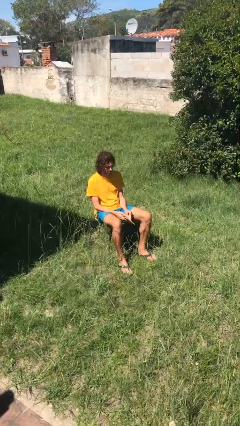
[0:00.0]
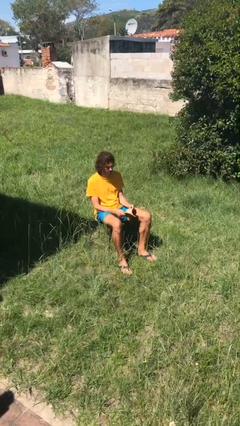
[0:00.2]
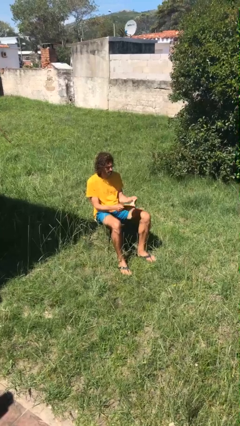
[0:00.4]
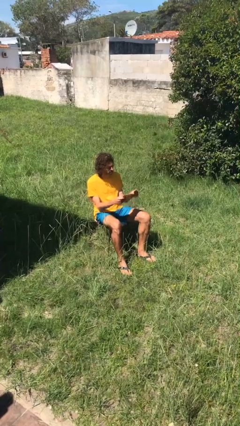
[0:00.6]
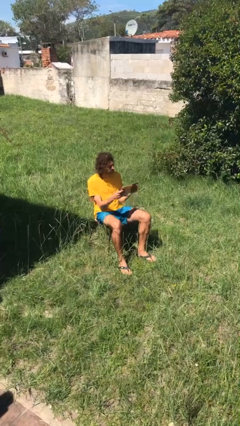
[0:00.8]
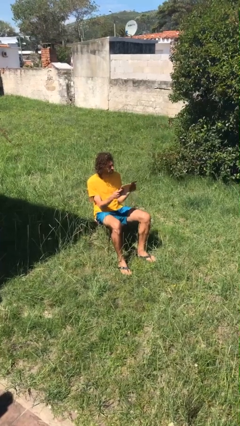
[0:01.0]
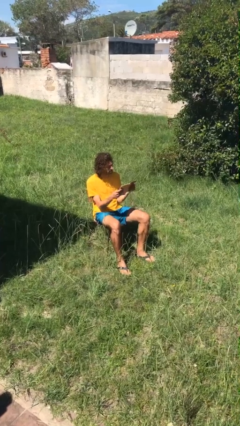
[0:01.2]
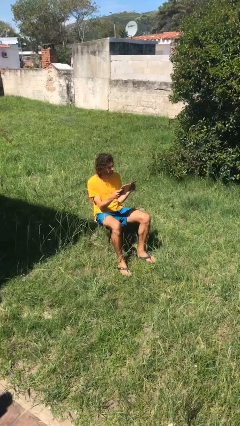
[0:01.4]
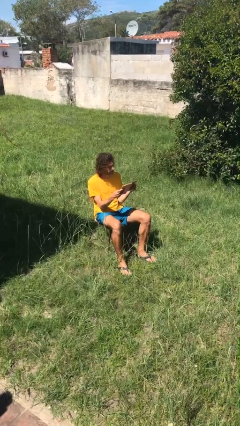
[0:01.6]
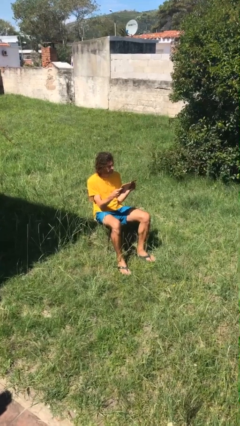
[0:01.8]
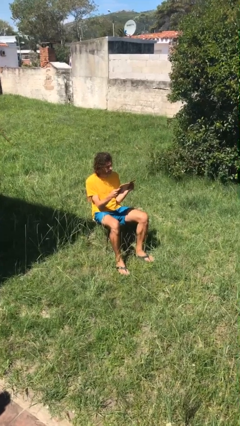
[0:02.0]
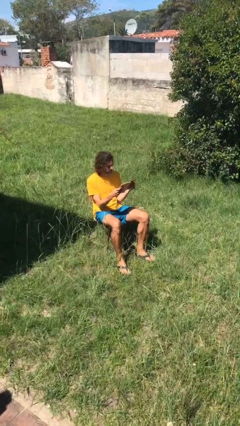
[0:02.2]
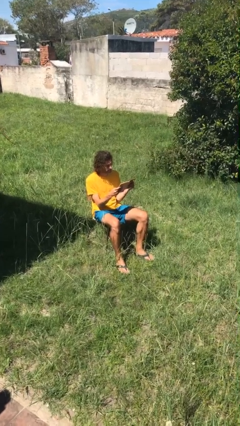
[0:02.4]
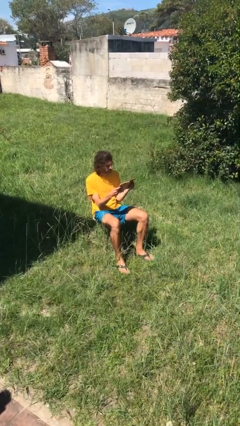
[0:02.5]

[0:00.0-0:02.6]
person reads document

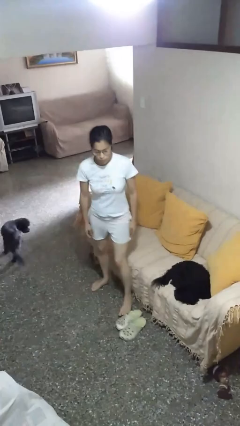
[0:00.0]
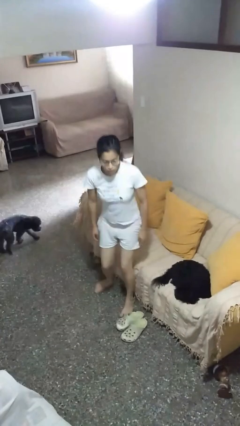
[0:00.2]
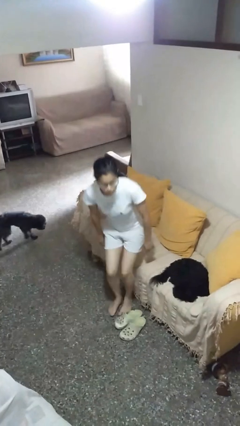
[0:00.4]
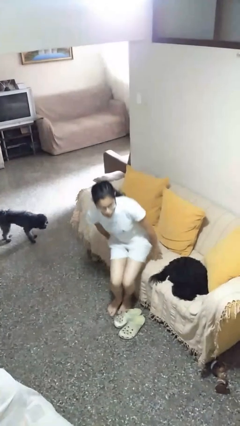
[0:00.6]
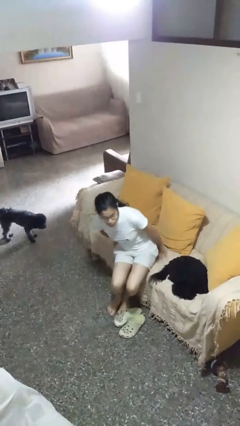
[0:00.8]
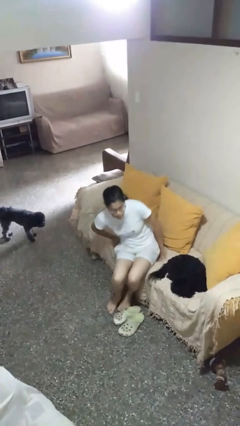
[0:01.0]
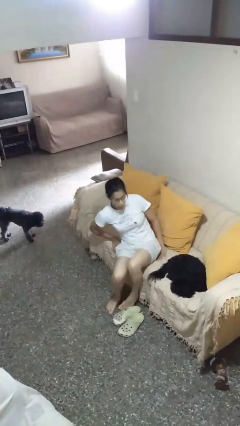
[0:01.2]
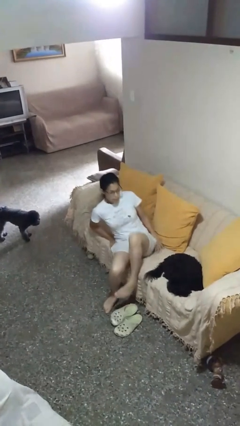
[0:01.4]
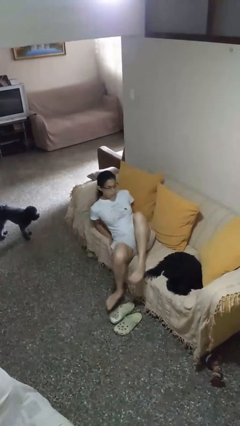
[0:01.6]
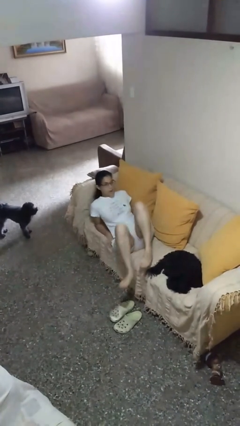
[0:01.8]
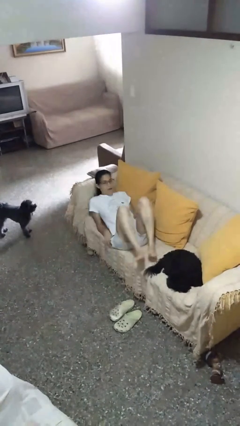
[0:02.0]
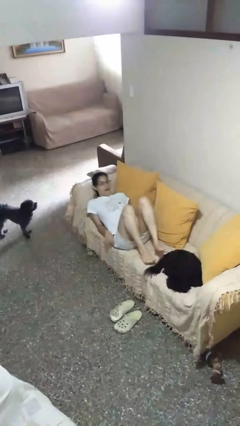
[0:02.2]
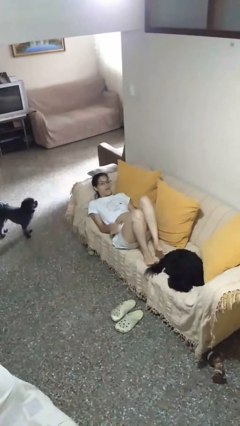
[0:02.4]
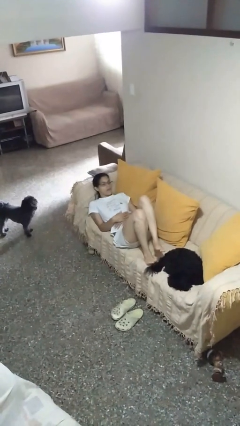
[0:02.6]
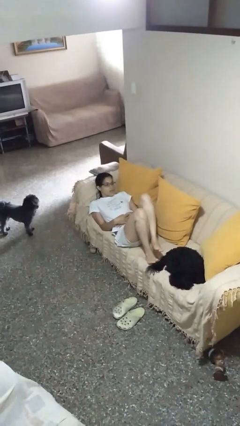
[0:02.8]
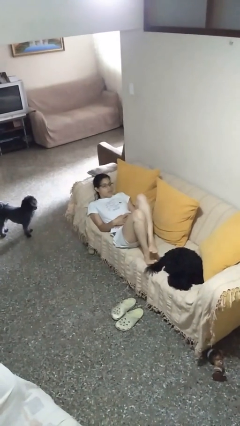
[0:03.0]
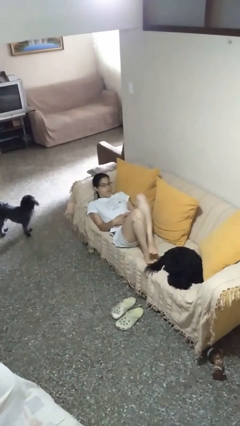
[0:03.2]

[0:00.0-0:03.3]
person lies down on couch

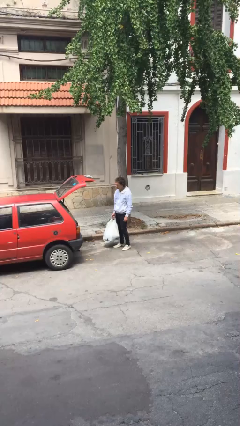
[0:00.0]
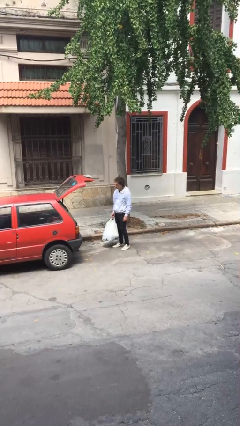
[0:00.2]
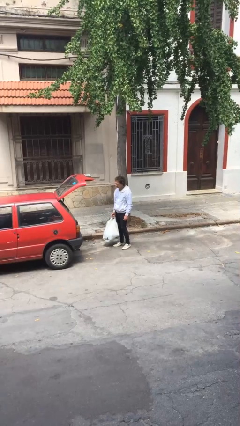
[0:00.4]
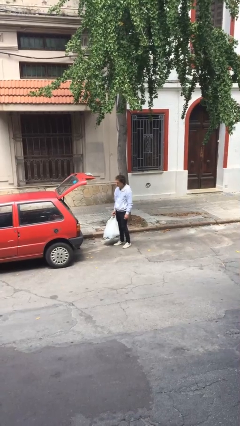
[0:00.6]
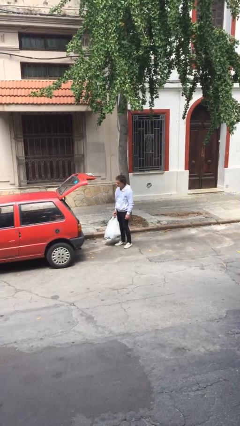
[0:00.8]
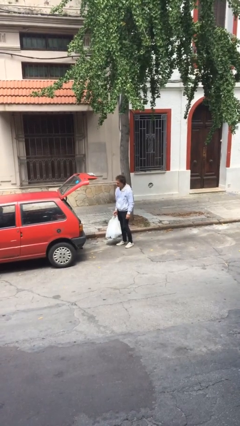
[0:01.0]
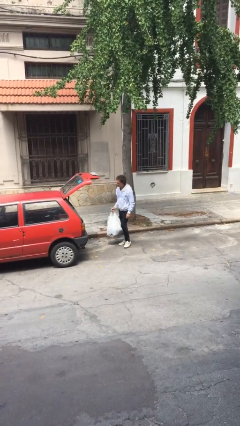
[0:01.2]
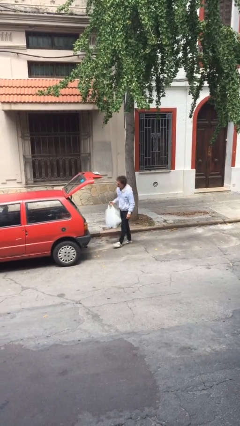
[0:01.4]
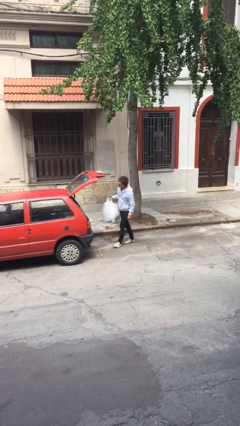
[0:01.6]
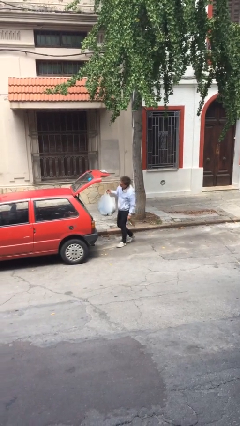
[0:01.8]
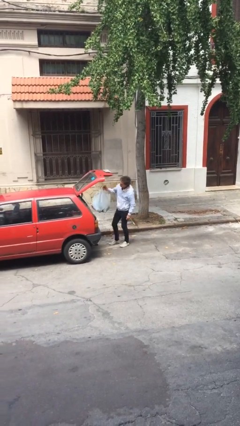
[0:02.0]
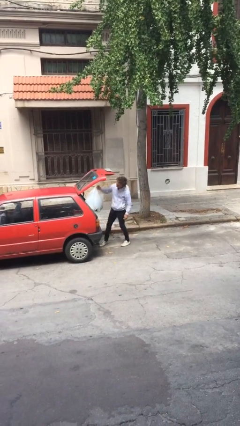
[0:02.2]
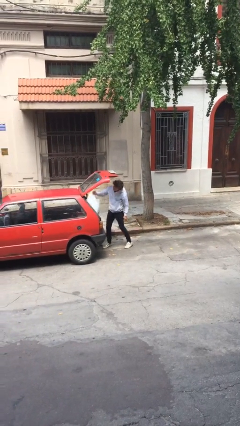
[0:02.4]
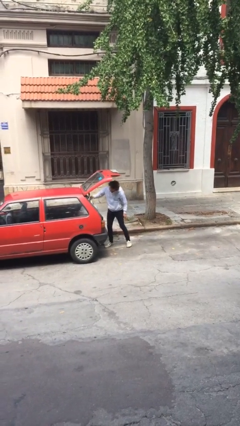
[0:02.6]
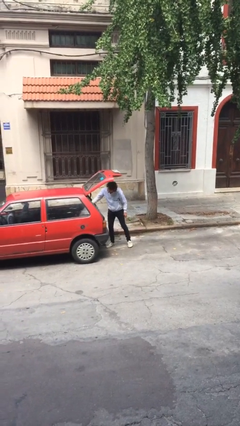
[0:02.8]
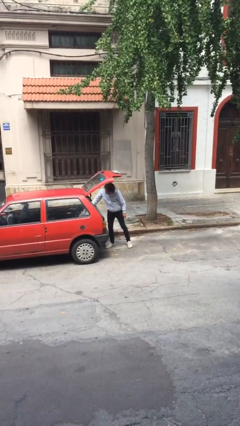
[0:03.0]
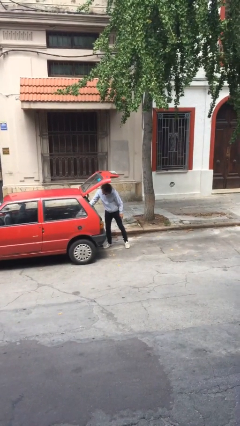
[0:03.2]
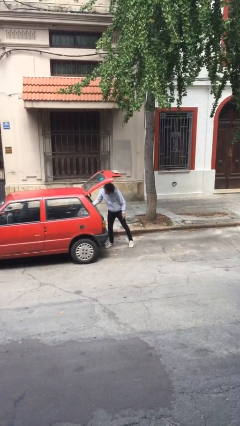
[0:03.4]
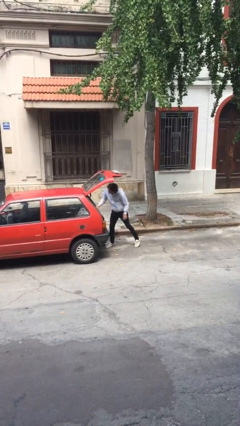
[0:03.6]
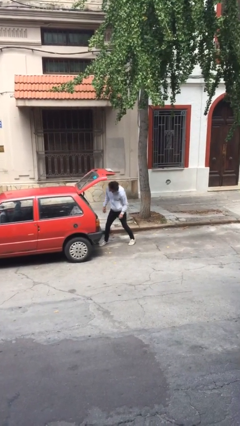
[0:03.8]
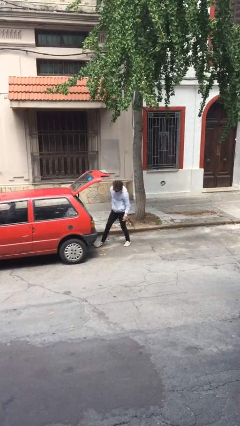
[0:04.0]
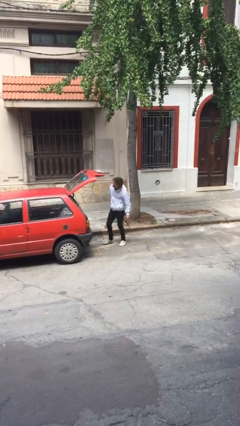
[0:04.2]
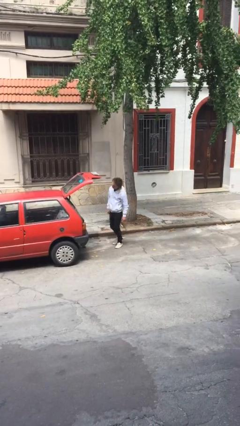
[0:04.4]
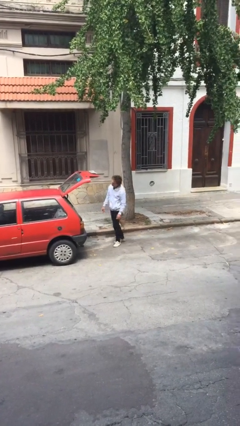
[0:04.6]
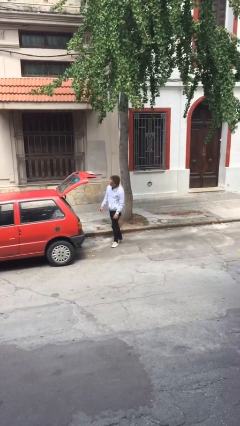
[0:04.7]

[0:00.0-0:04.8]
person loads car

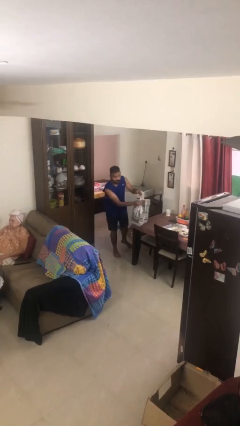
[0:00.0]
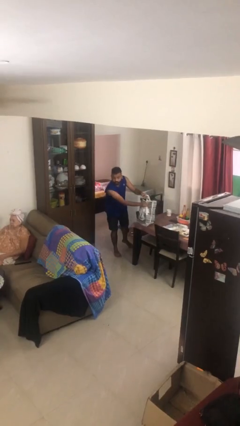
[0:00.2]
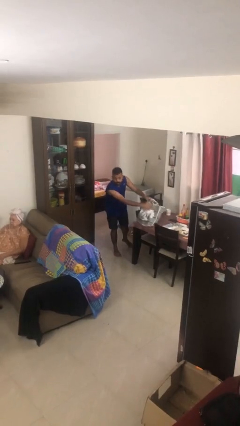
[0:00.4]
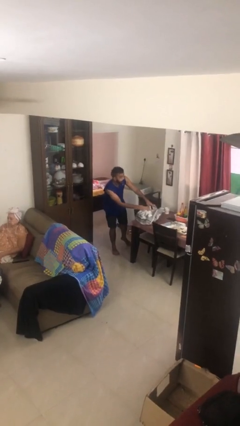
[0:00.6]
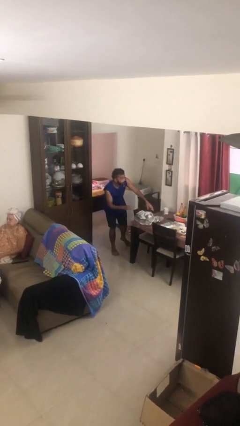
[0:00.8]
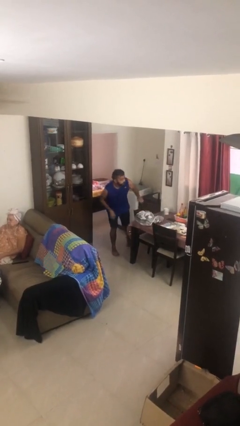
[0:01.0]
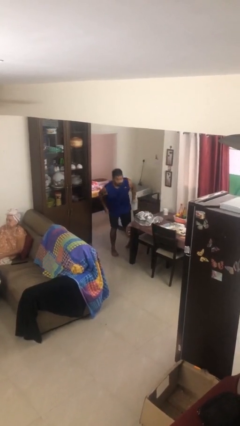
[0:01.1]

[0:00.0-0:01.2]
person puts down object on table

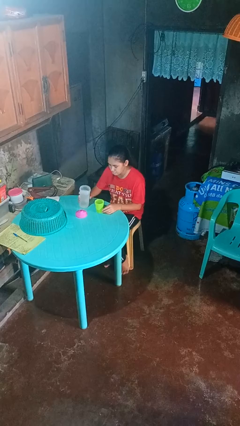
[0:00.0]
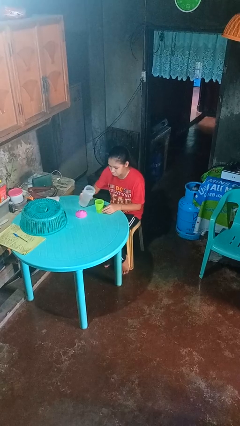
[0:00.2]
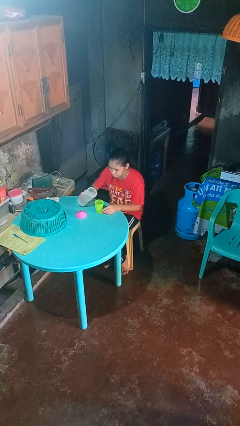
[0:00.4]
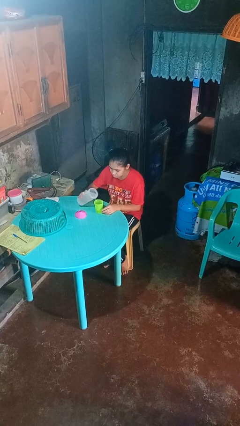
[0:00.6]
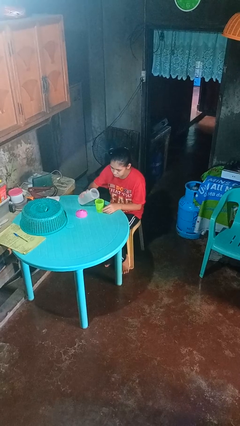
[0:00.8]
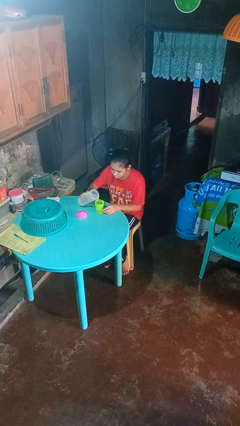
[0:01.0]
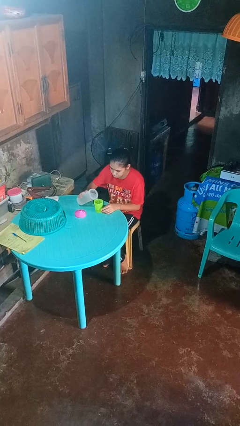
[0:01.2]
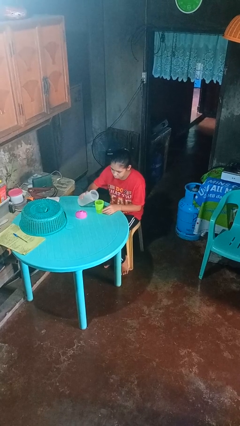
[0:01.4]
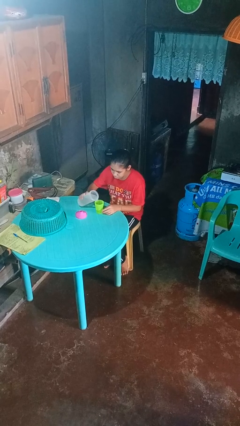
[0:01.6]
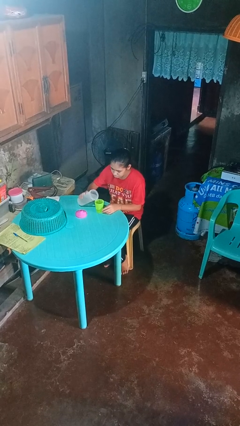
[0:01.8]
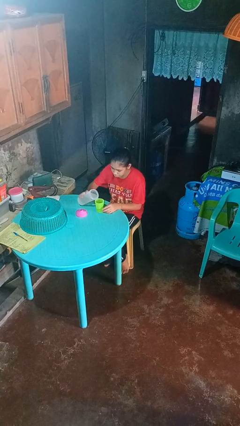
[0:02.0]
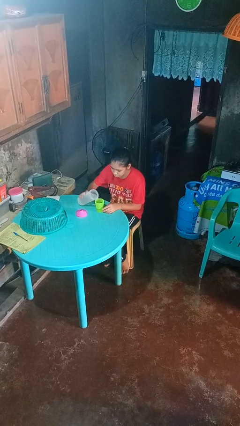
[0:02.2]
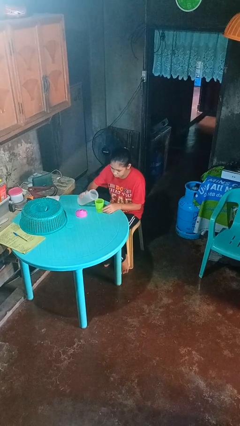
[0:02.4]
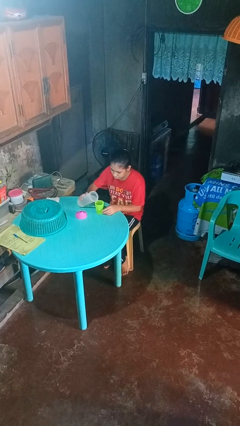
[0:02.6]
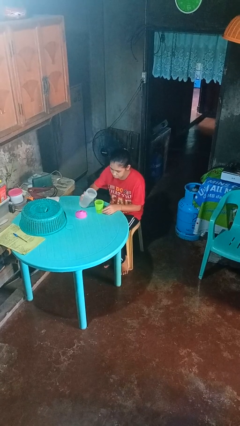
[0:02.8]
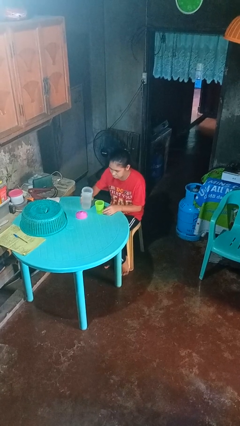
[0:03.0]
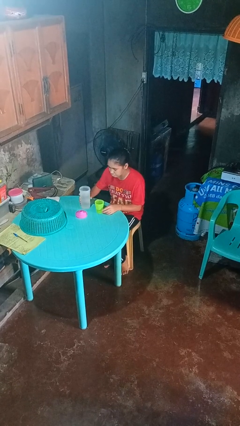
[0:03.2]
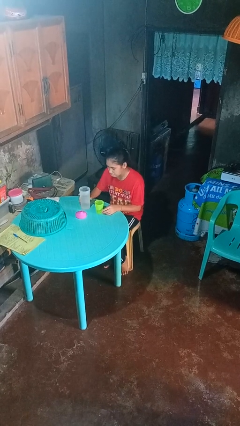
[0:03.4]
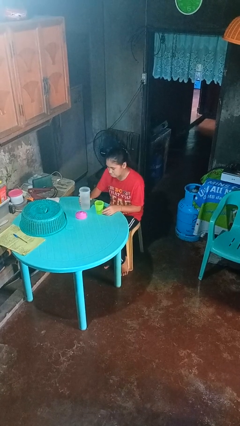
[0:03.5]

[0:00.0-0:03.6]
person pours liquid into cup

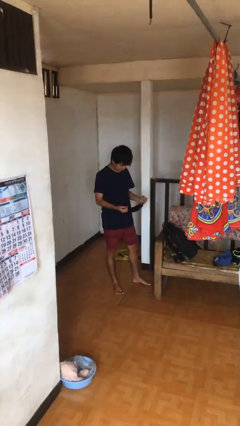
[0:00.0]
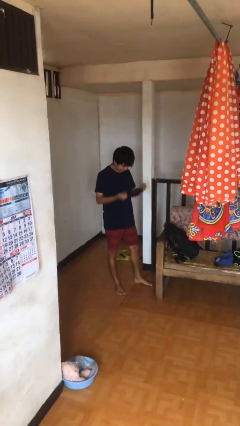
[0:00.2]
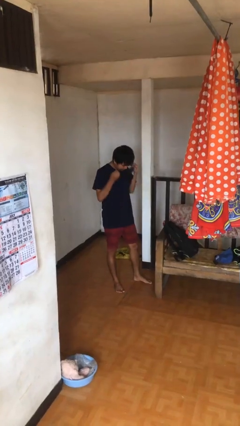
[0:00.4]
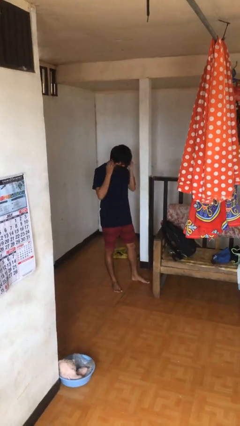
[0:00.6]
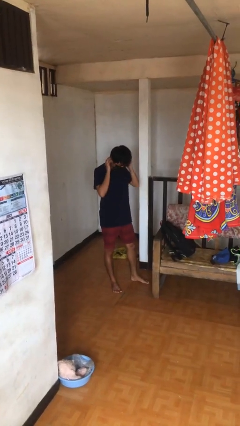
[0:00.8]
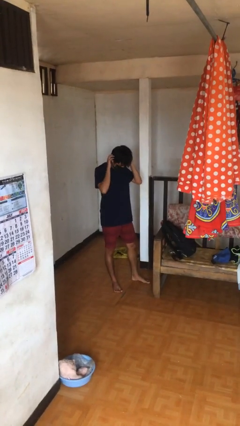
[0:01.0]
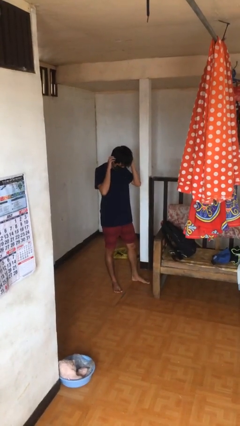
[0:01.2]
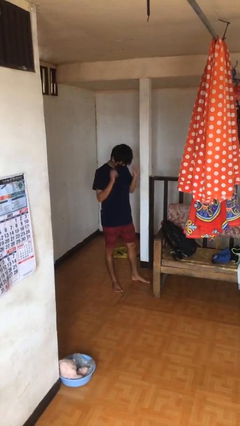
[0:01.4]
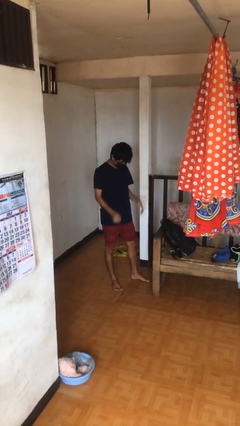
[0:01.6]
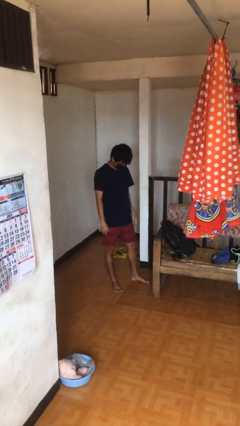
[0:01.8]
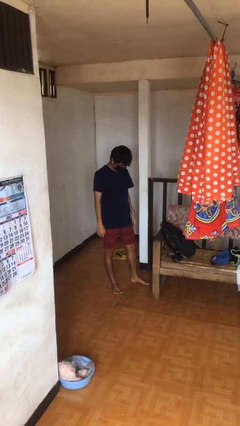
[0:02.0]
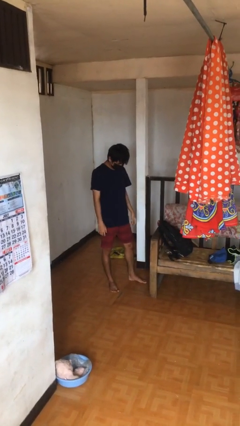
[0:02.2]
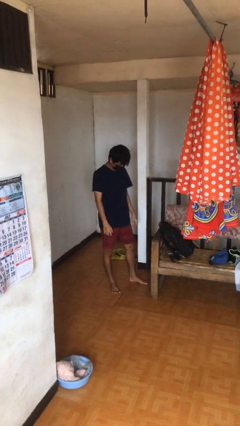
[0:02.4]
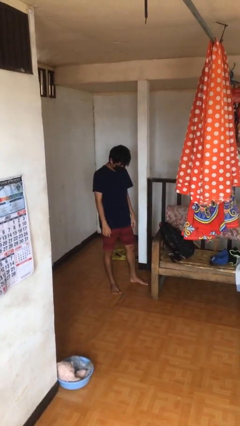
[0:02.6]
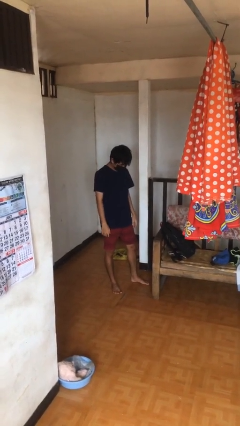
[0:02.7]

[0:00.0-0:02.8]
person puts on facemask
